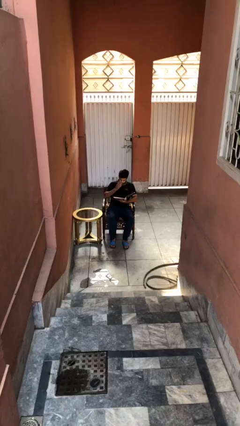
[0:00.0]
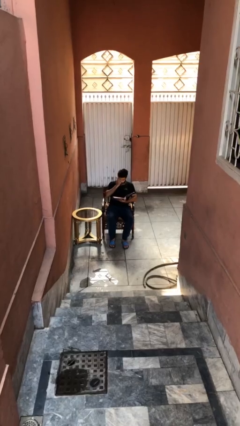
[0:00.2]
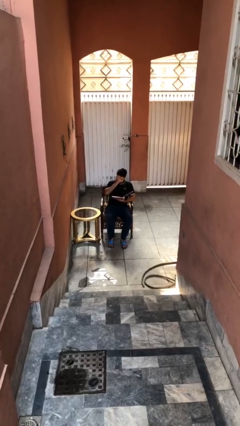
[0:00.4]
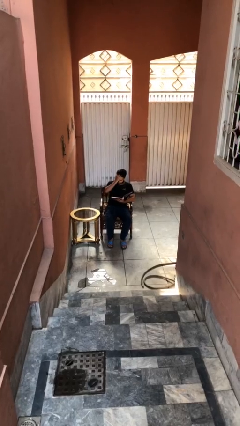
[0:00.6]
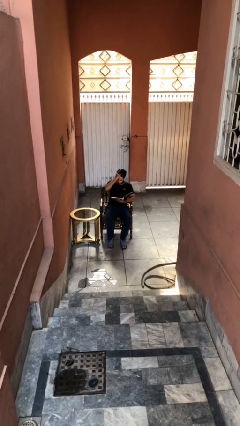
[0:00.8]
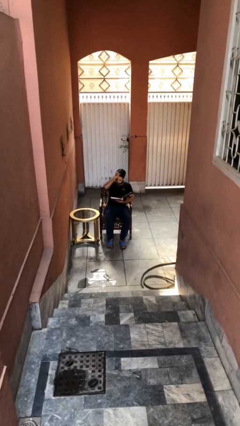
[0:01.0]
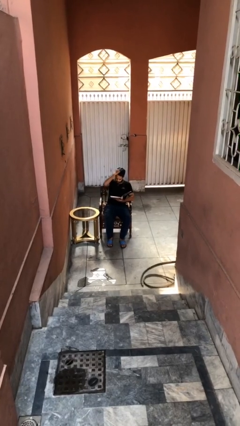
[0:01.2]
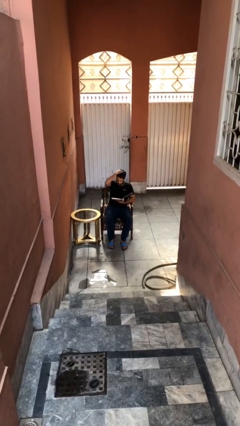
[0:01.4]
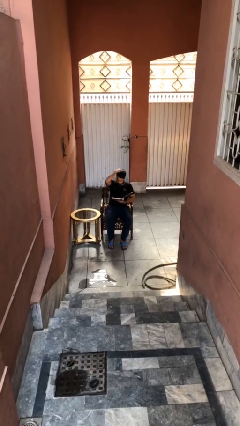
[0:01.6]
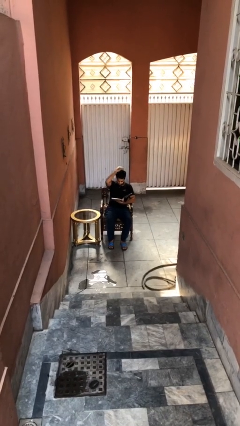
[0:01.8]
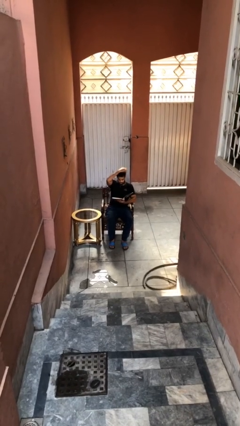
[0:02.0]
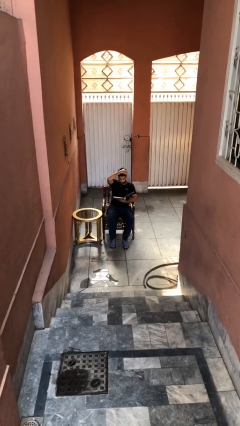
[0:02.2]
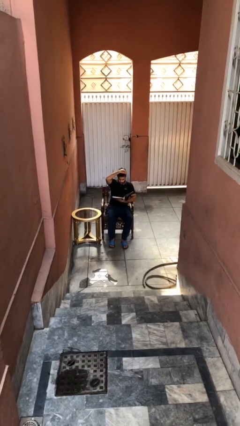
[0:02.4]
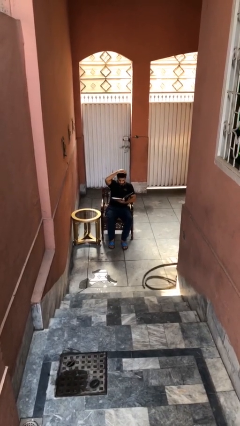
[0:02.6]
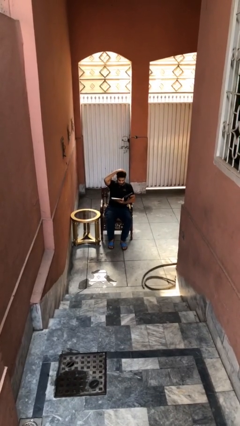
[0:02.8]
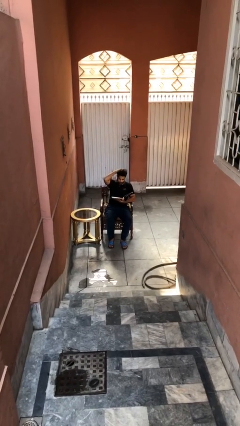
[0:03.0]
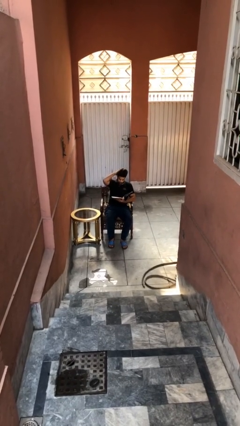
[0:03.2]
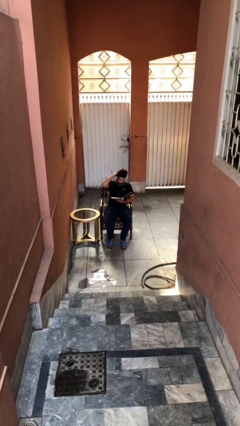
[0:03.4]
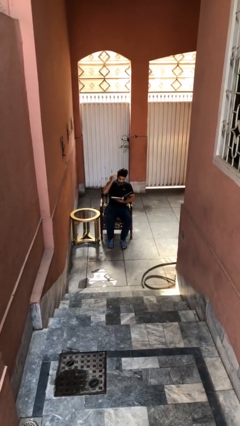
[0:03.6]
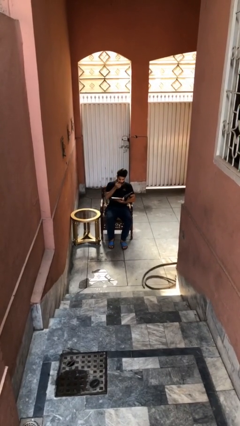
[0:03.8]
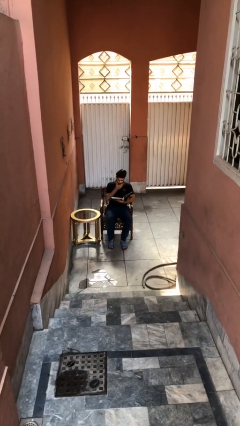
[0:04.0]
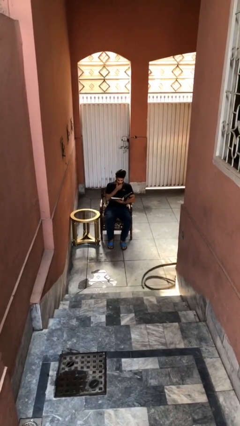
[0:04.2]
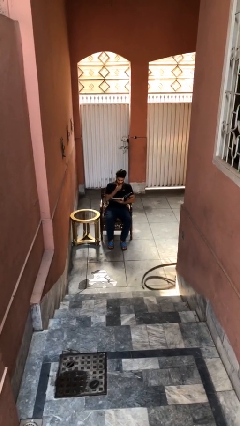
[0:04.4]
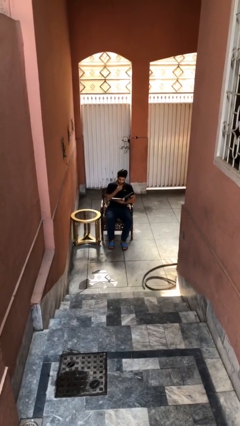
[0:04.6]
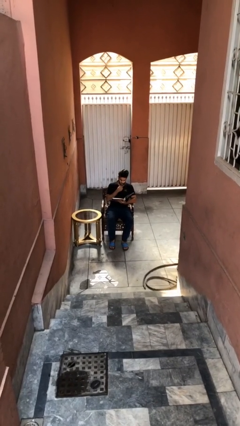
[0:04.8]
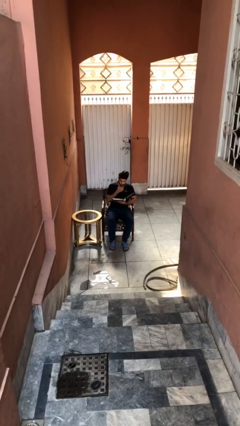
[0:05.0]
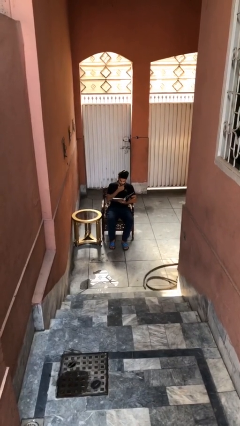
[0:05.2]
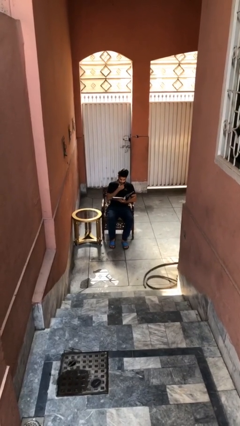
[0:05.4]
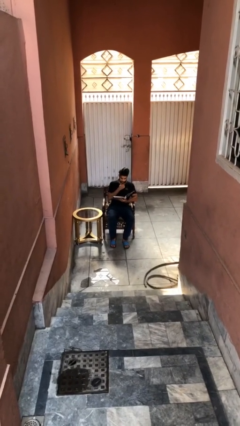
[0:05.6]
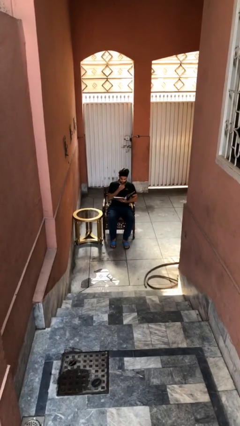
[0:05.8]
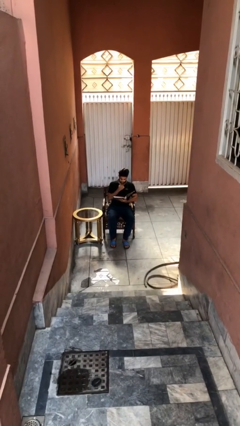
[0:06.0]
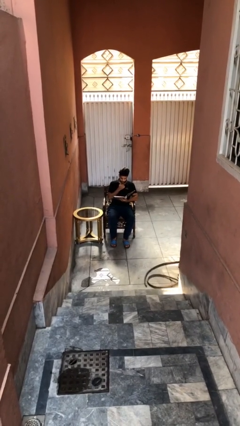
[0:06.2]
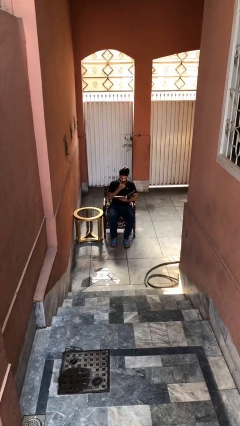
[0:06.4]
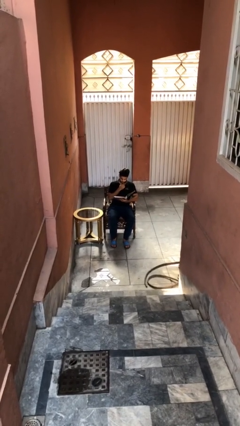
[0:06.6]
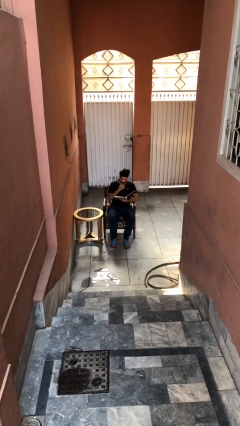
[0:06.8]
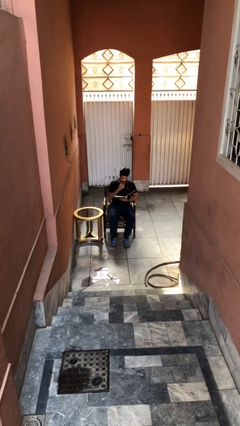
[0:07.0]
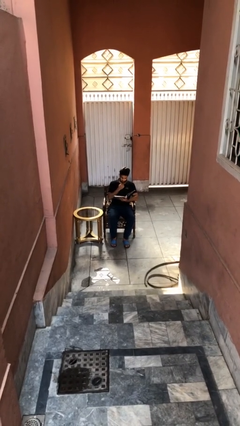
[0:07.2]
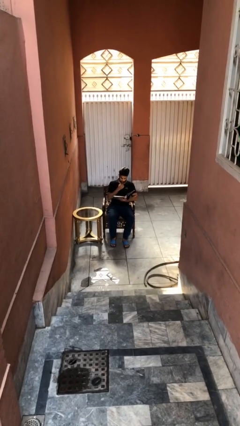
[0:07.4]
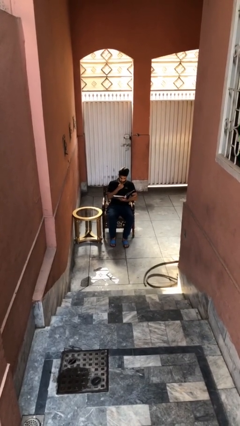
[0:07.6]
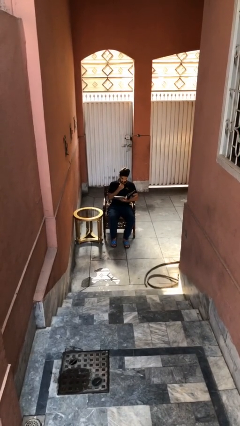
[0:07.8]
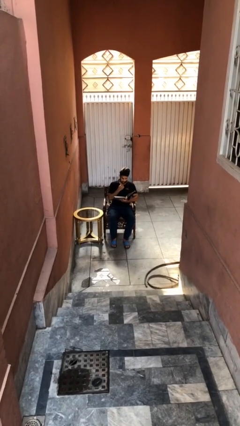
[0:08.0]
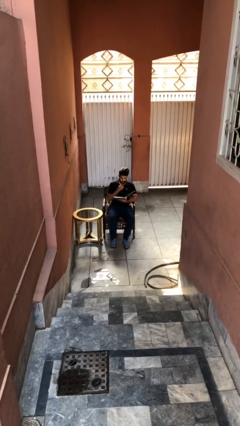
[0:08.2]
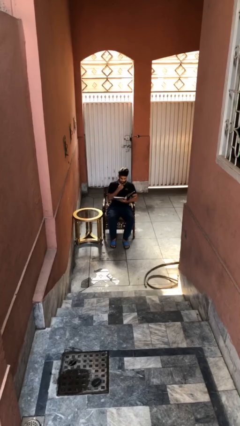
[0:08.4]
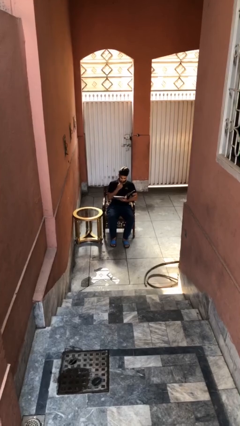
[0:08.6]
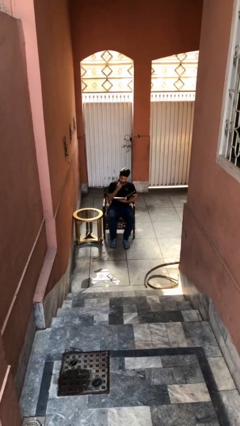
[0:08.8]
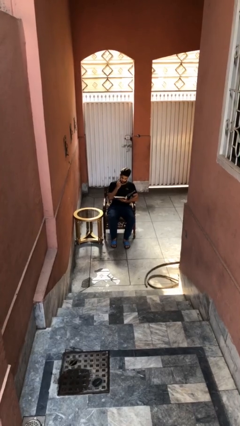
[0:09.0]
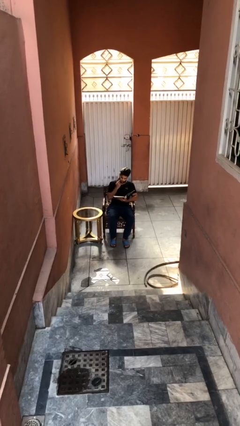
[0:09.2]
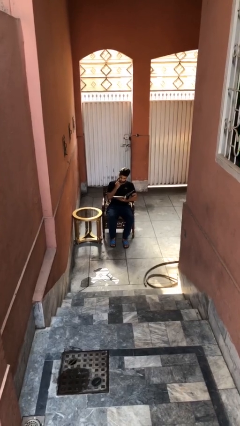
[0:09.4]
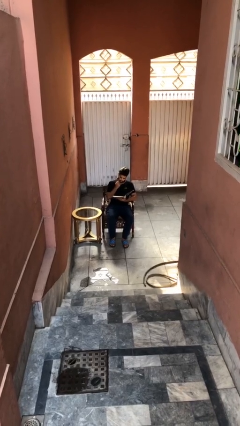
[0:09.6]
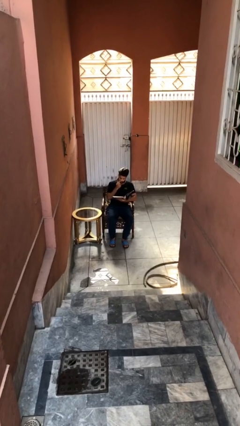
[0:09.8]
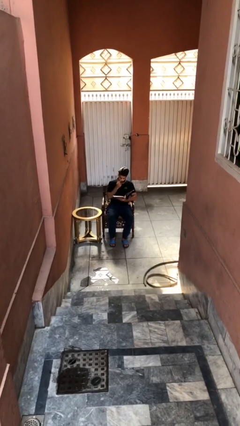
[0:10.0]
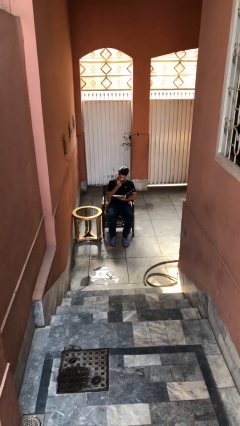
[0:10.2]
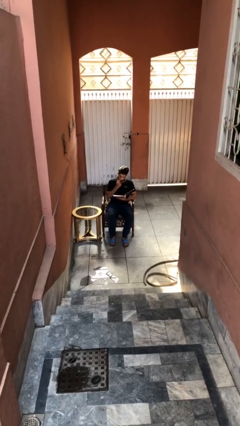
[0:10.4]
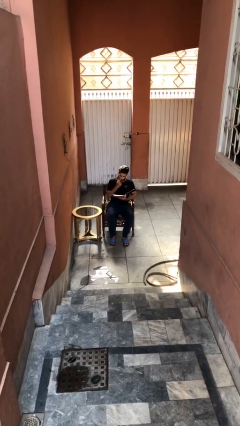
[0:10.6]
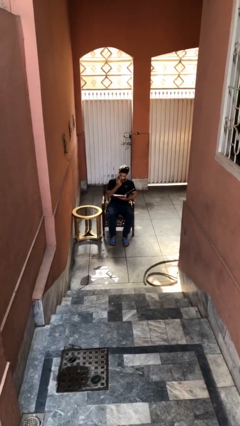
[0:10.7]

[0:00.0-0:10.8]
person reads document

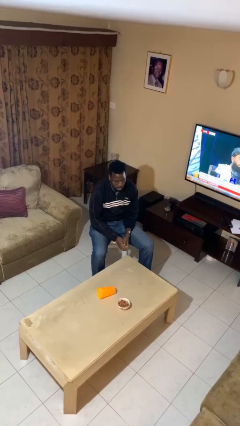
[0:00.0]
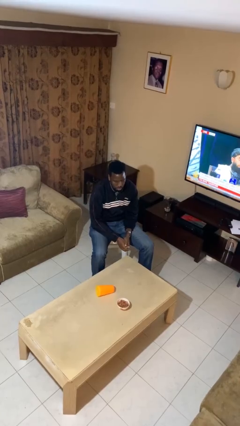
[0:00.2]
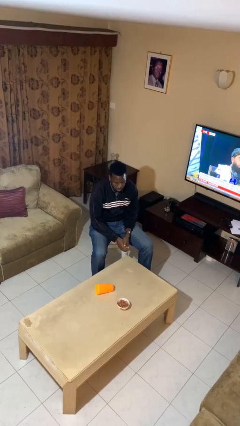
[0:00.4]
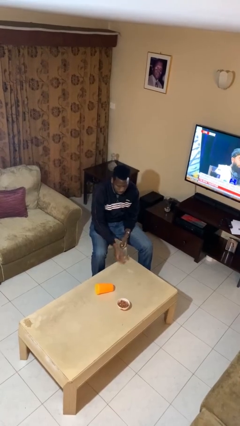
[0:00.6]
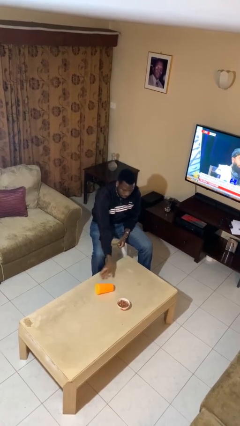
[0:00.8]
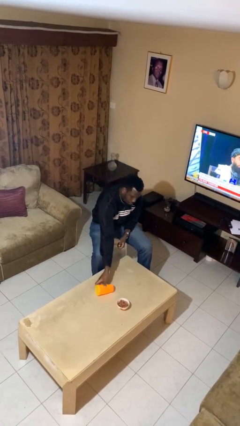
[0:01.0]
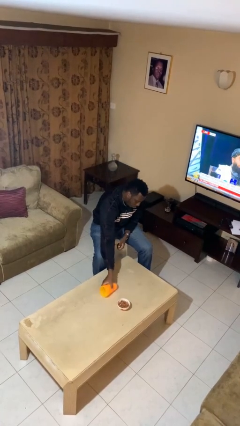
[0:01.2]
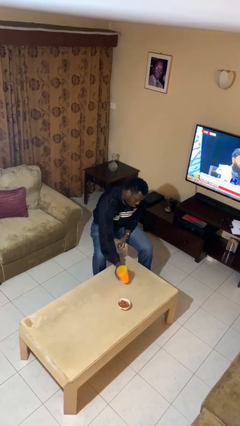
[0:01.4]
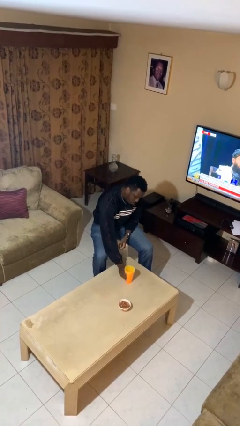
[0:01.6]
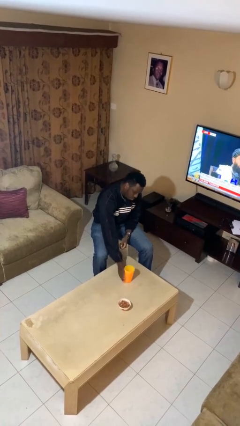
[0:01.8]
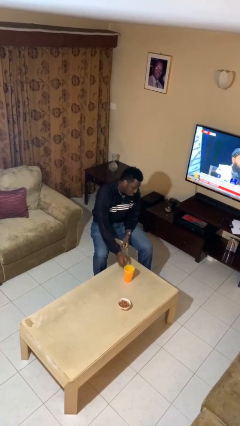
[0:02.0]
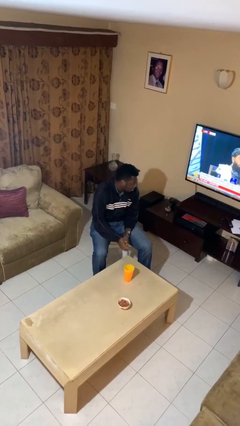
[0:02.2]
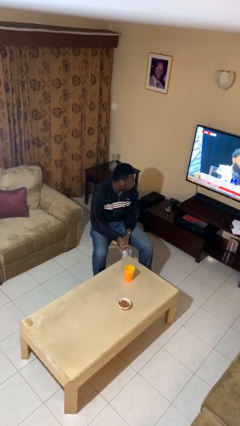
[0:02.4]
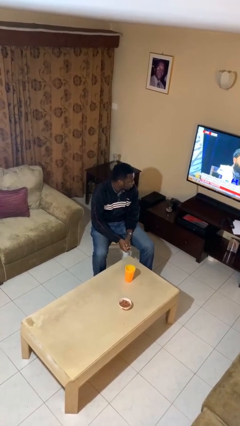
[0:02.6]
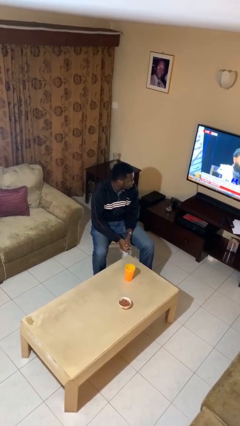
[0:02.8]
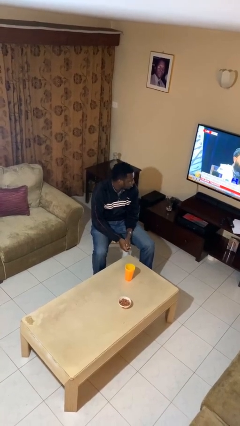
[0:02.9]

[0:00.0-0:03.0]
person sets upright glass

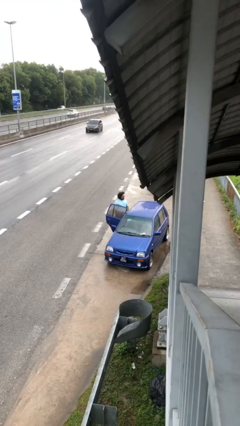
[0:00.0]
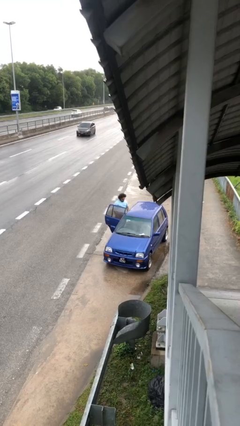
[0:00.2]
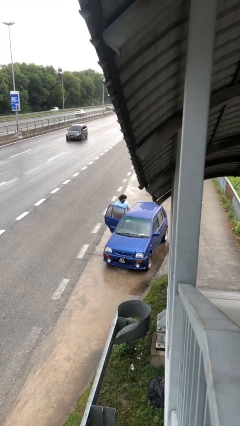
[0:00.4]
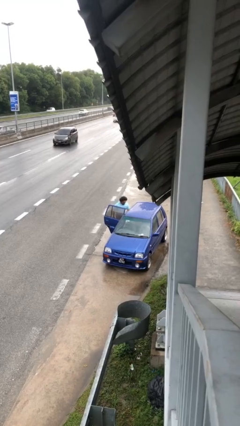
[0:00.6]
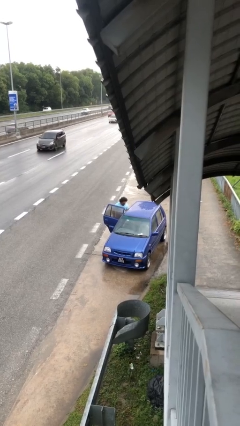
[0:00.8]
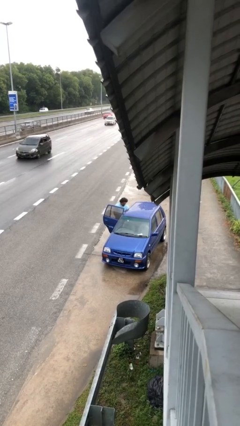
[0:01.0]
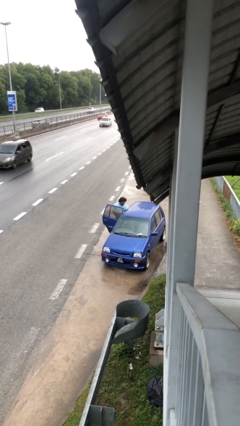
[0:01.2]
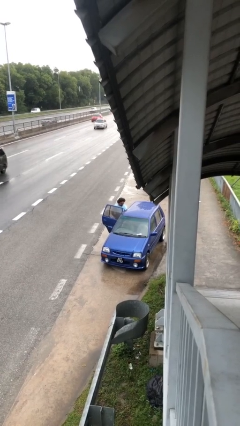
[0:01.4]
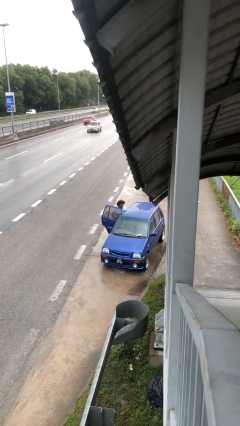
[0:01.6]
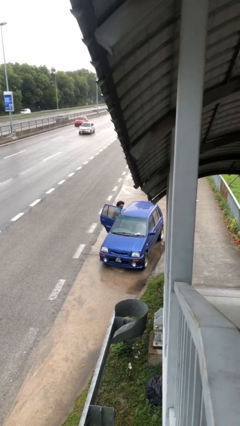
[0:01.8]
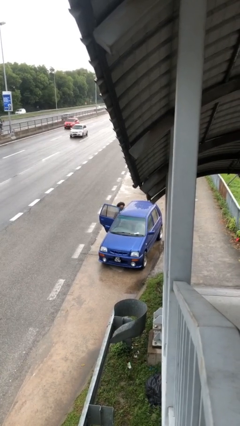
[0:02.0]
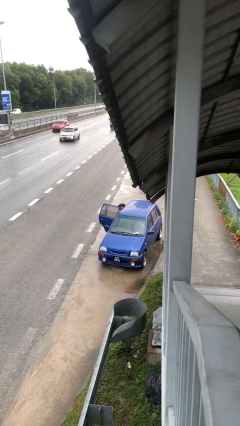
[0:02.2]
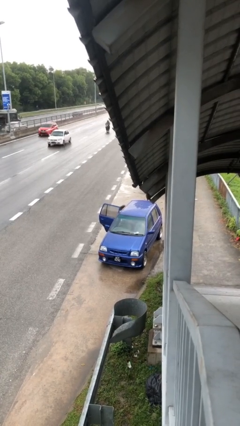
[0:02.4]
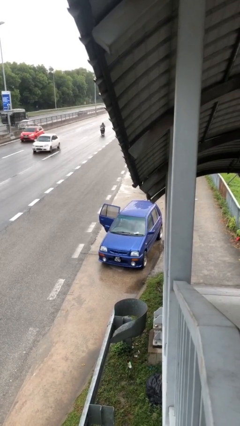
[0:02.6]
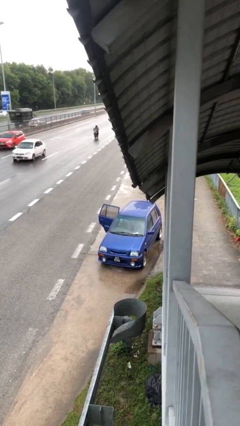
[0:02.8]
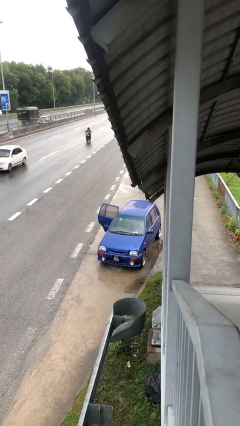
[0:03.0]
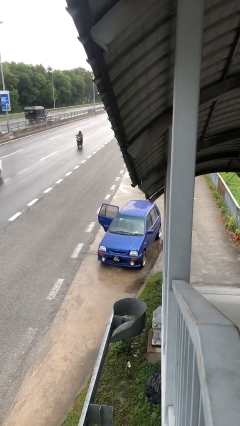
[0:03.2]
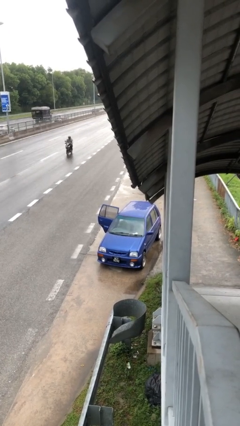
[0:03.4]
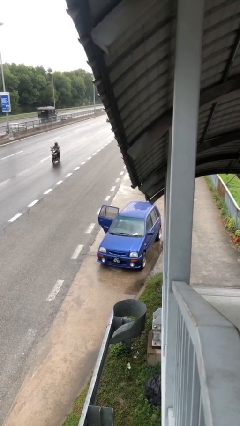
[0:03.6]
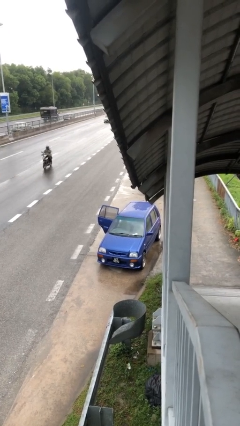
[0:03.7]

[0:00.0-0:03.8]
person enters car

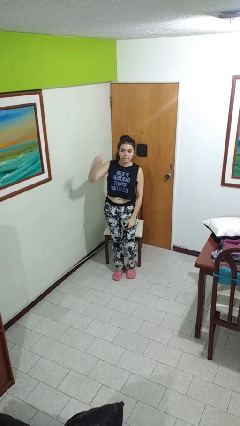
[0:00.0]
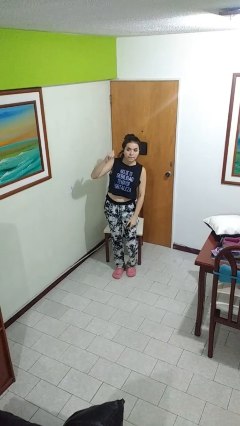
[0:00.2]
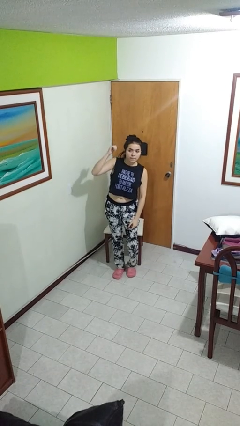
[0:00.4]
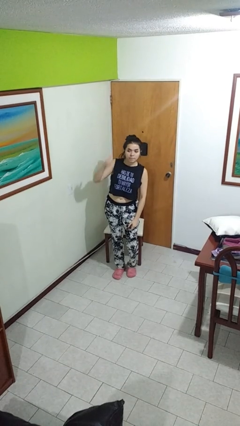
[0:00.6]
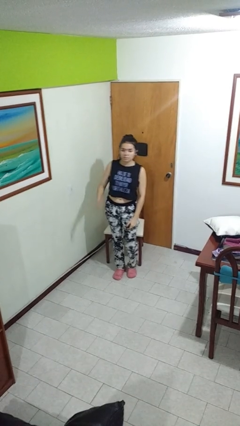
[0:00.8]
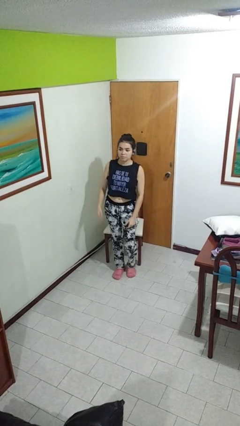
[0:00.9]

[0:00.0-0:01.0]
person gestures behind me
